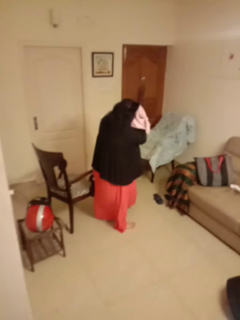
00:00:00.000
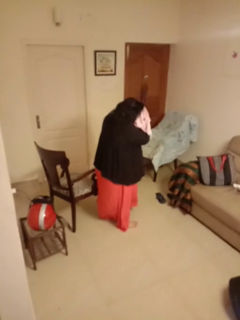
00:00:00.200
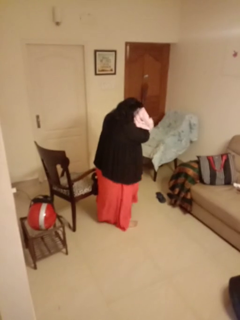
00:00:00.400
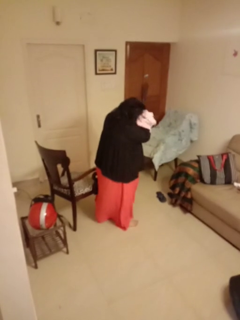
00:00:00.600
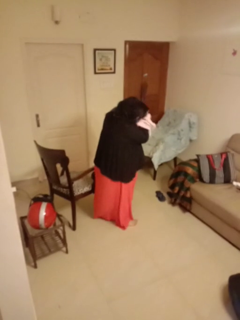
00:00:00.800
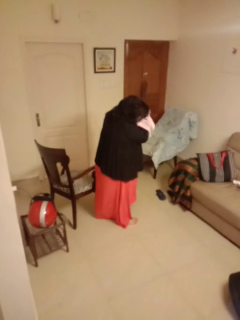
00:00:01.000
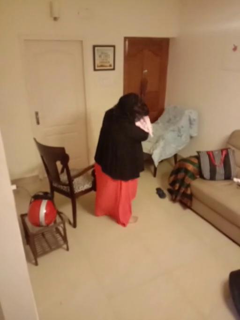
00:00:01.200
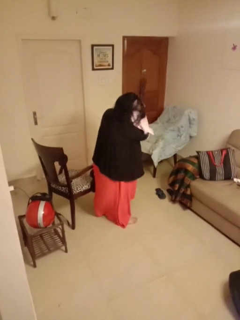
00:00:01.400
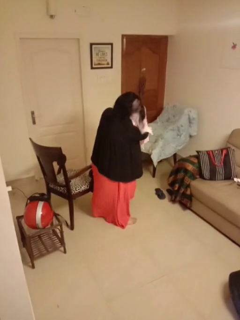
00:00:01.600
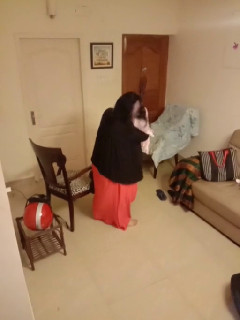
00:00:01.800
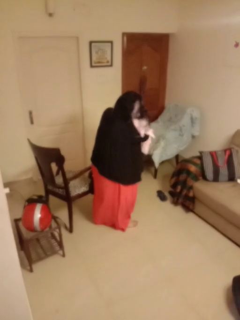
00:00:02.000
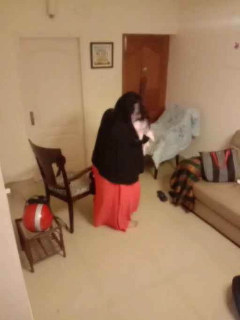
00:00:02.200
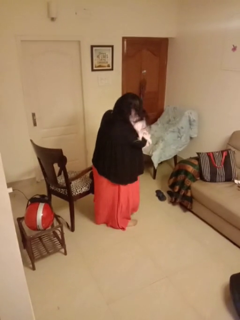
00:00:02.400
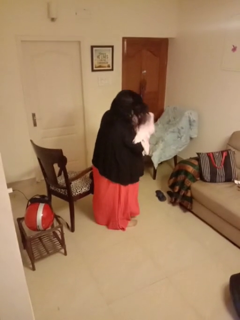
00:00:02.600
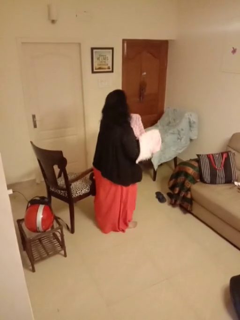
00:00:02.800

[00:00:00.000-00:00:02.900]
person dries hair with towel

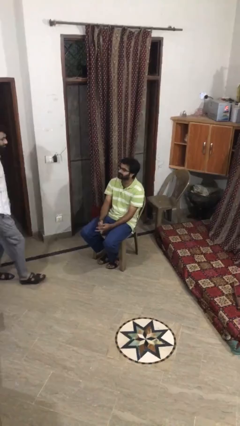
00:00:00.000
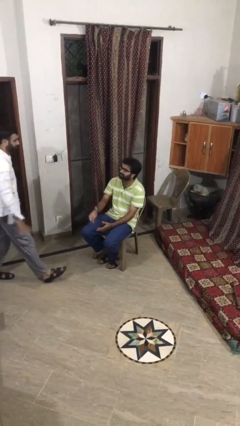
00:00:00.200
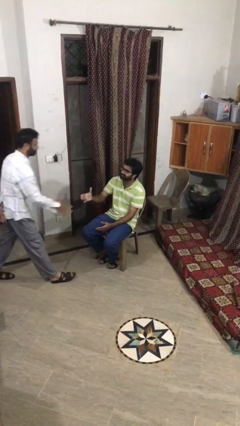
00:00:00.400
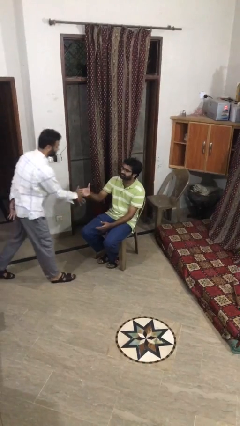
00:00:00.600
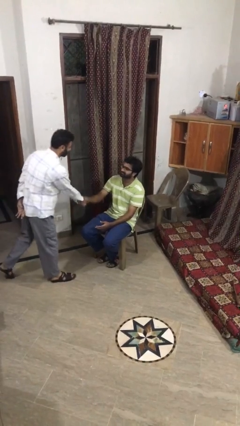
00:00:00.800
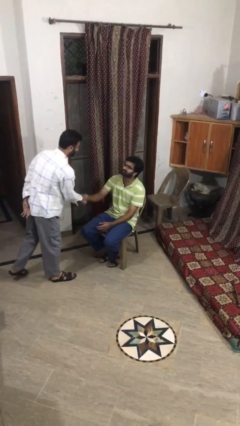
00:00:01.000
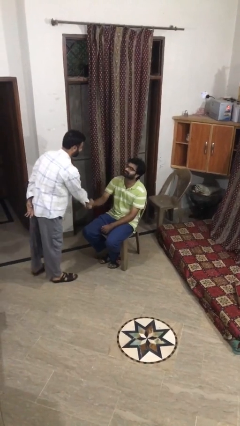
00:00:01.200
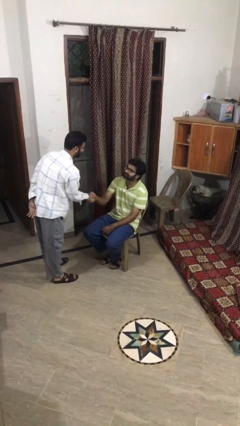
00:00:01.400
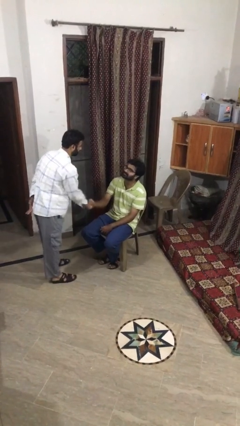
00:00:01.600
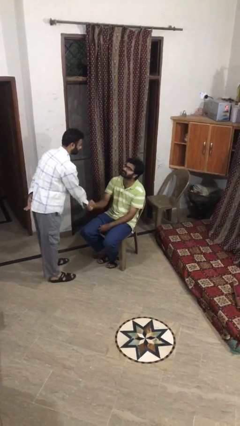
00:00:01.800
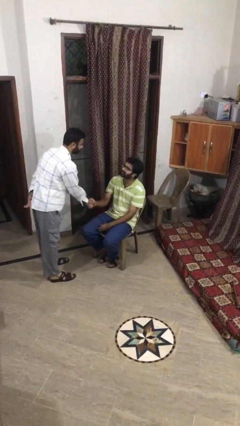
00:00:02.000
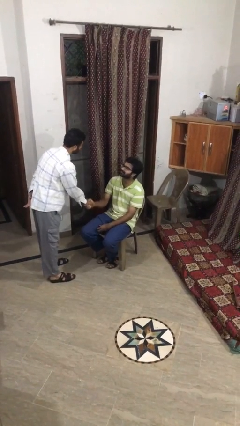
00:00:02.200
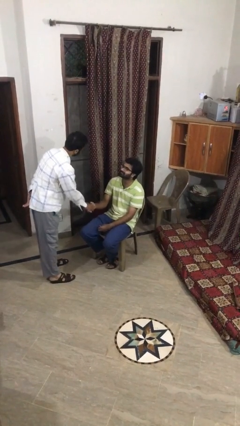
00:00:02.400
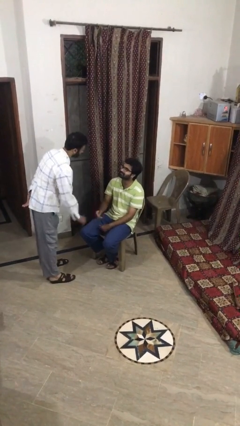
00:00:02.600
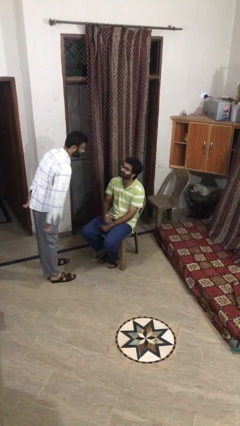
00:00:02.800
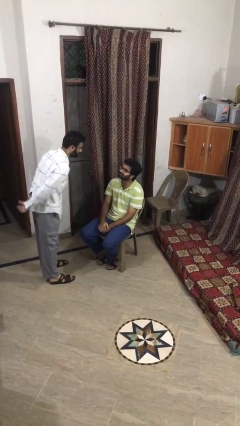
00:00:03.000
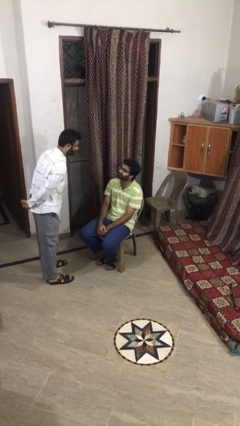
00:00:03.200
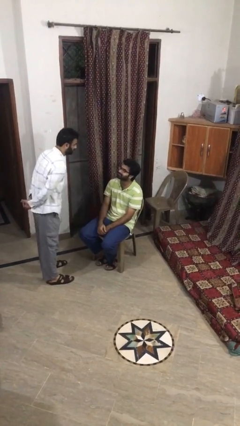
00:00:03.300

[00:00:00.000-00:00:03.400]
person shakes hand

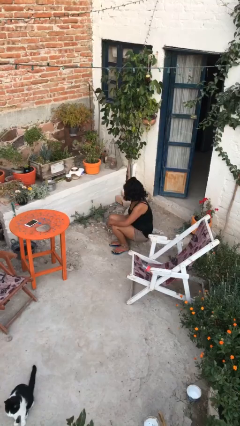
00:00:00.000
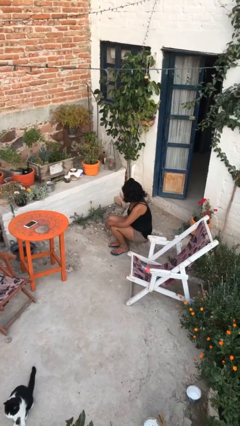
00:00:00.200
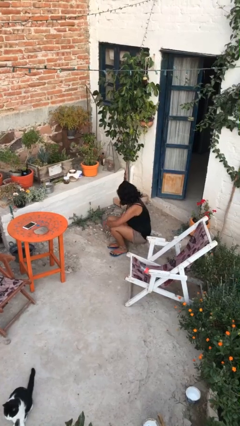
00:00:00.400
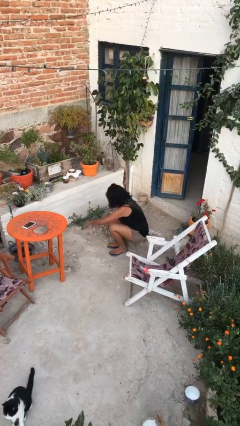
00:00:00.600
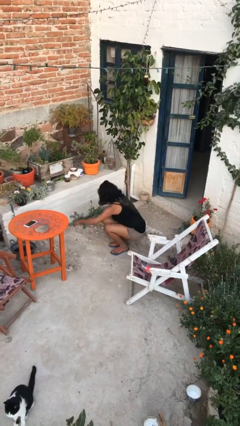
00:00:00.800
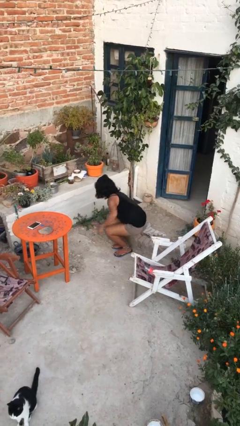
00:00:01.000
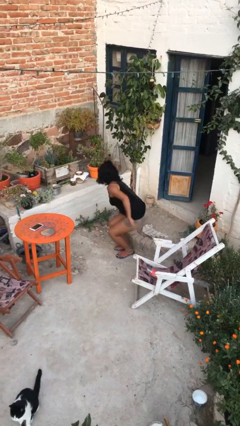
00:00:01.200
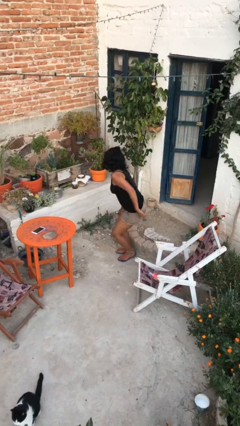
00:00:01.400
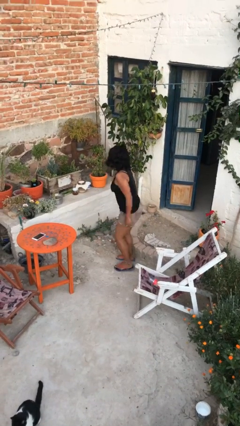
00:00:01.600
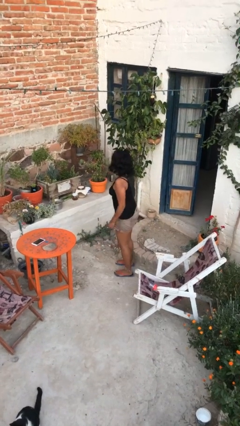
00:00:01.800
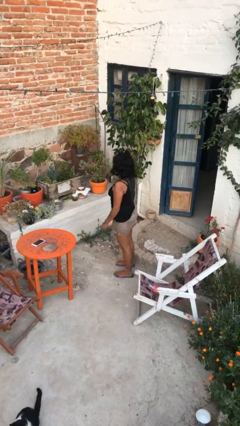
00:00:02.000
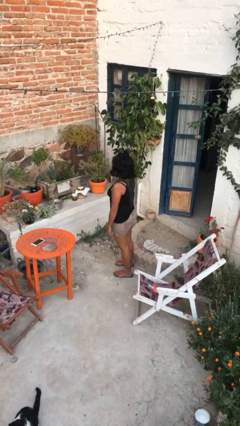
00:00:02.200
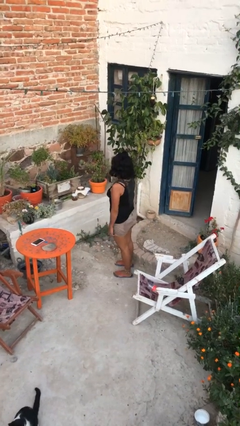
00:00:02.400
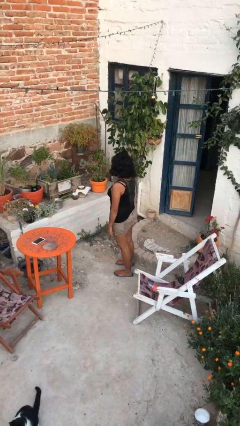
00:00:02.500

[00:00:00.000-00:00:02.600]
person stands up

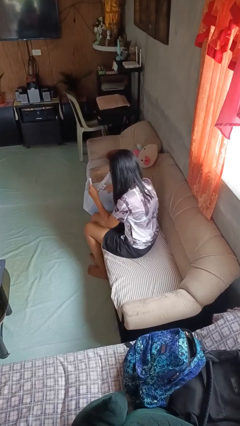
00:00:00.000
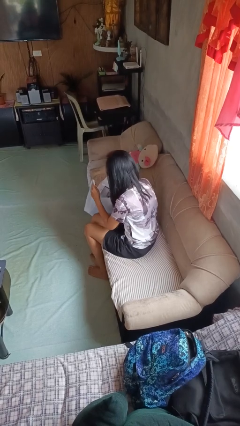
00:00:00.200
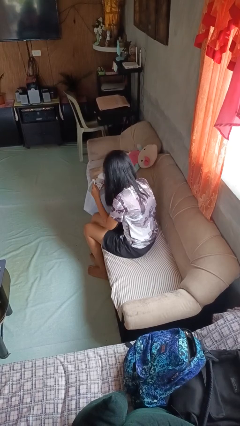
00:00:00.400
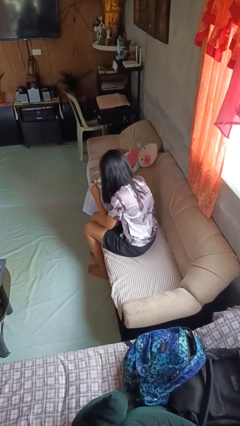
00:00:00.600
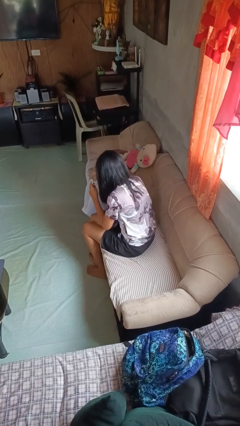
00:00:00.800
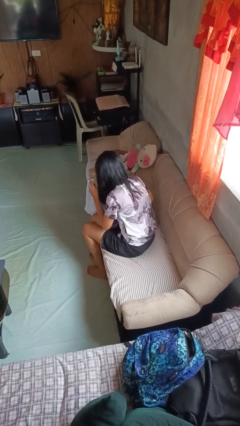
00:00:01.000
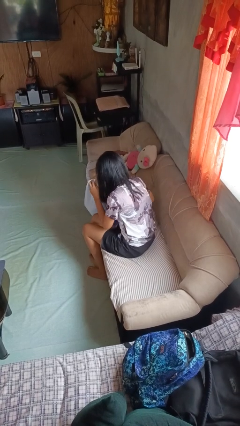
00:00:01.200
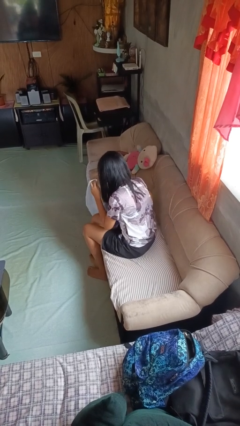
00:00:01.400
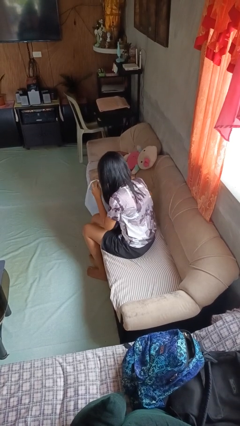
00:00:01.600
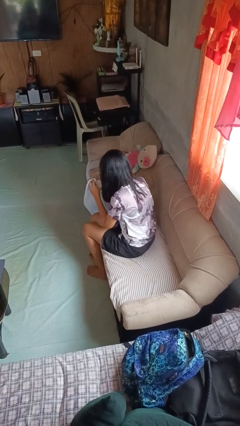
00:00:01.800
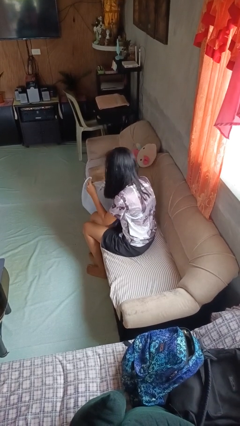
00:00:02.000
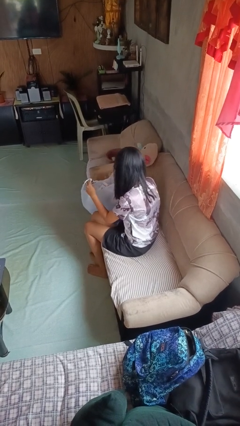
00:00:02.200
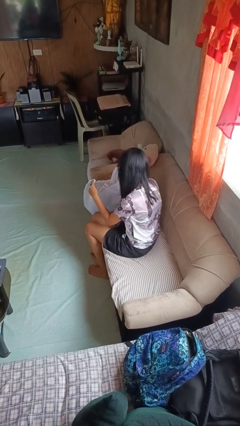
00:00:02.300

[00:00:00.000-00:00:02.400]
person searches in bag

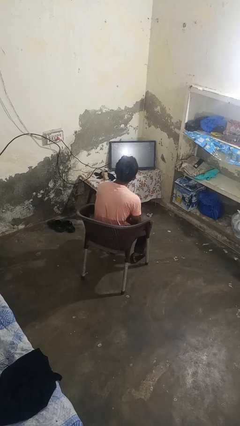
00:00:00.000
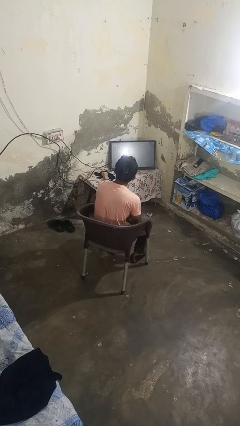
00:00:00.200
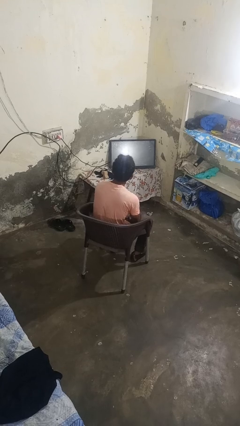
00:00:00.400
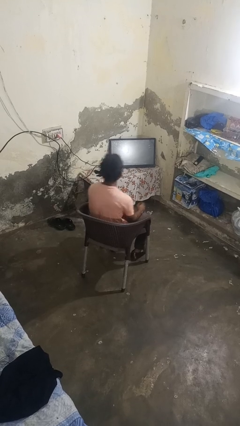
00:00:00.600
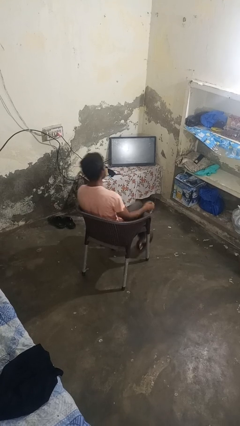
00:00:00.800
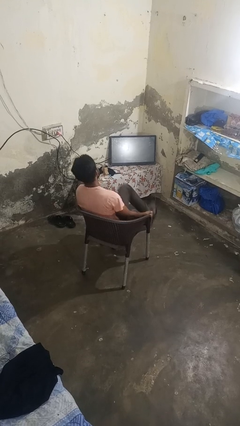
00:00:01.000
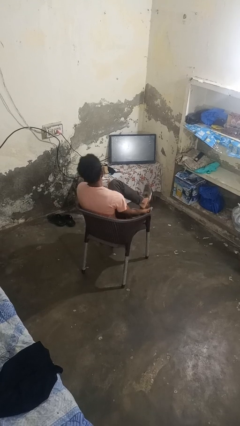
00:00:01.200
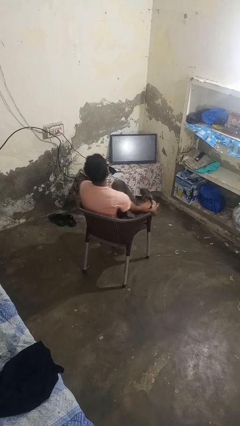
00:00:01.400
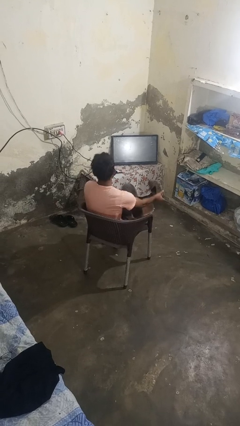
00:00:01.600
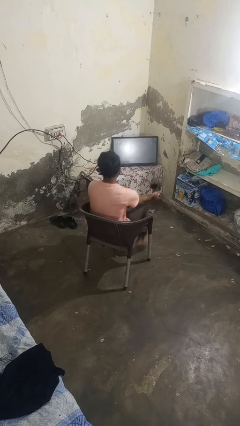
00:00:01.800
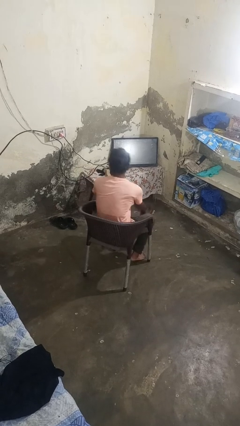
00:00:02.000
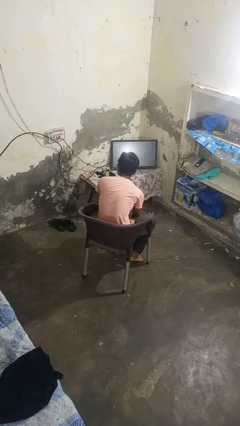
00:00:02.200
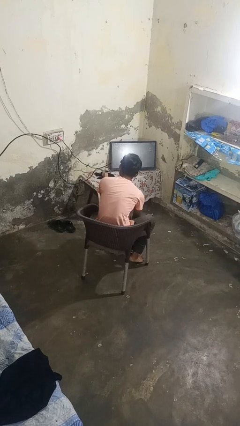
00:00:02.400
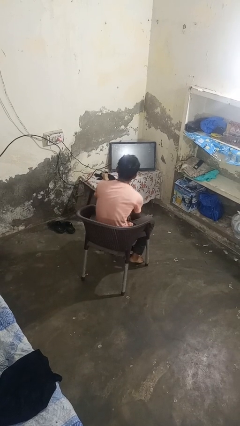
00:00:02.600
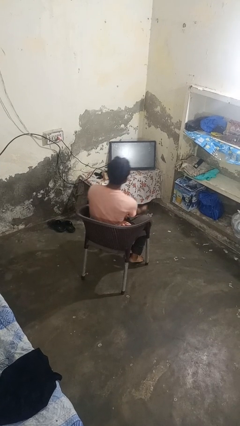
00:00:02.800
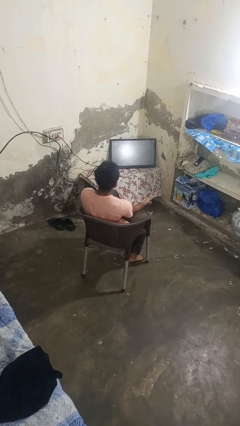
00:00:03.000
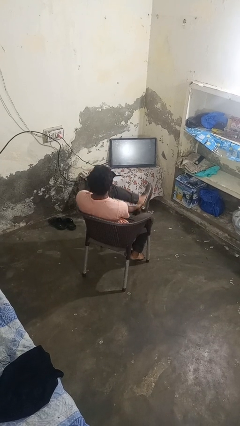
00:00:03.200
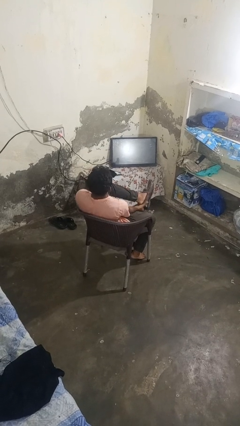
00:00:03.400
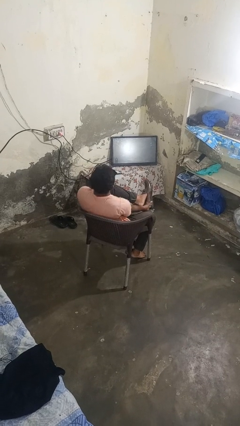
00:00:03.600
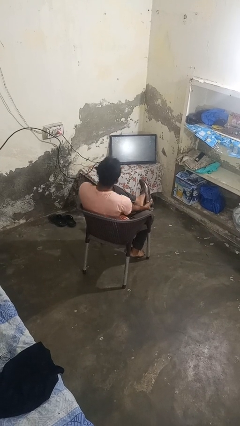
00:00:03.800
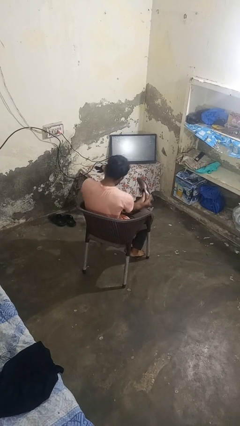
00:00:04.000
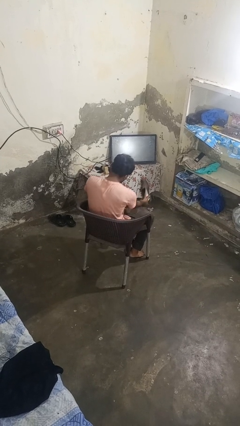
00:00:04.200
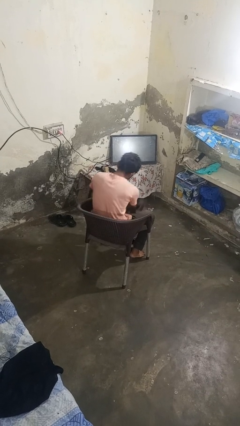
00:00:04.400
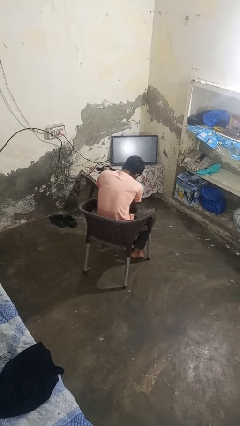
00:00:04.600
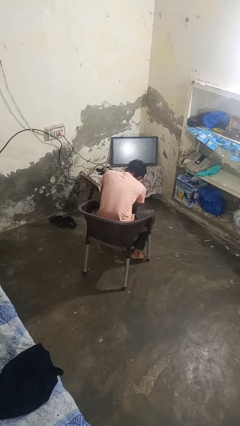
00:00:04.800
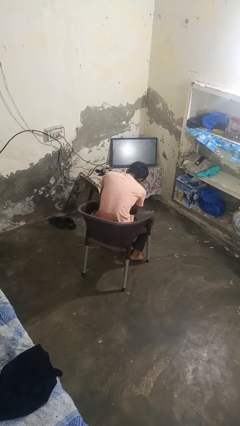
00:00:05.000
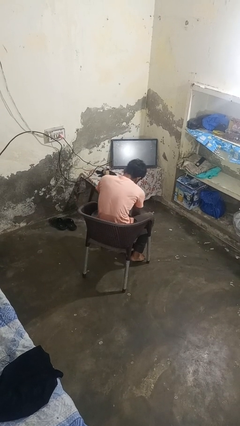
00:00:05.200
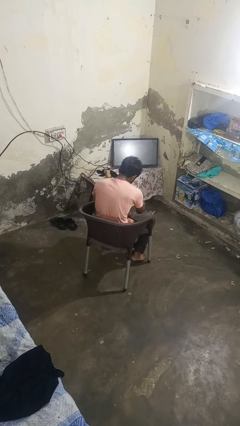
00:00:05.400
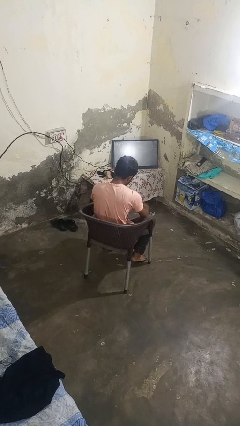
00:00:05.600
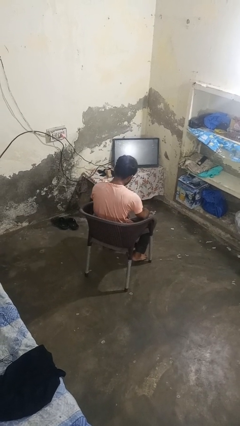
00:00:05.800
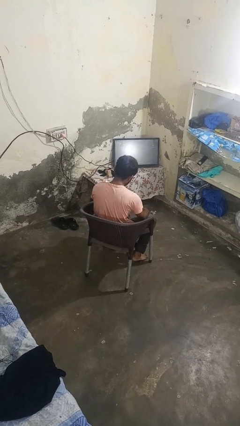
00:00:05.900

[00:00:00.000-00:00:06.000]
person takes off shoes

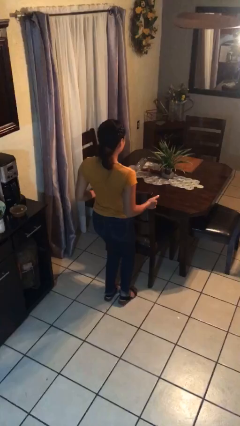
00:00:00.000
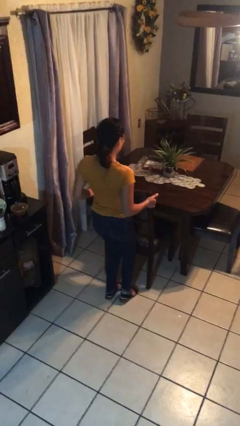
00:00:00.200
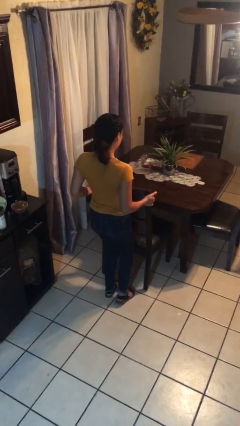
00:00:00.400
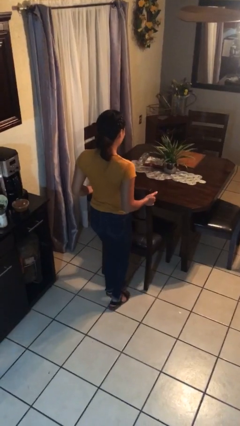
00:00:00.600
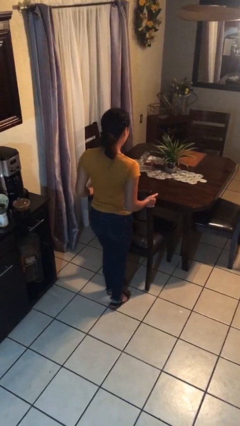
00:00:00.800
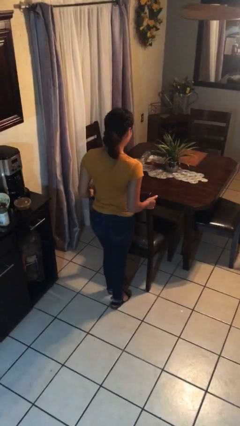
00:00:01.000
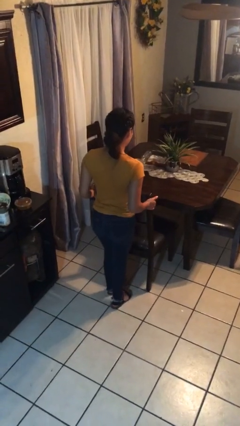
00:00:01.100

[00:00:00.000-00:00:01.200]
person pulls out chair
